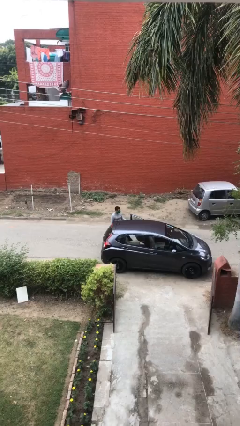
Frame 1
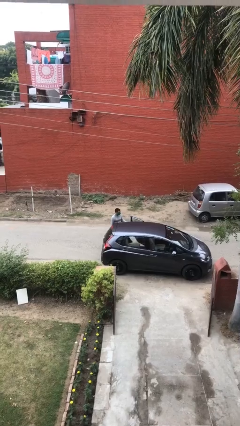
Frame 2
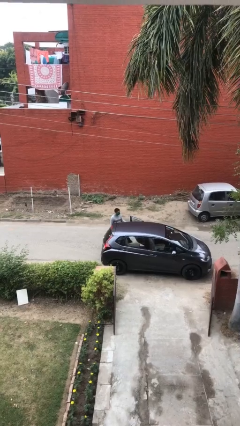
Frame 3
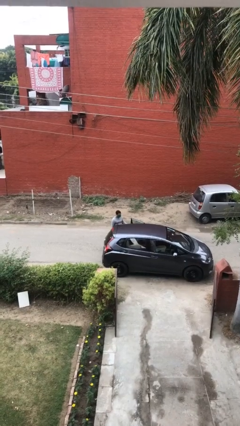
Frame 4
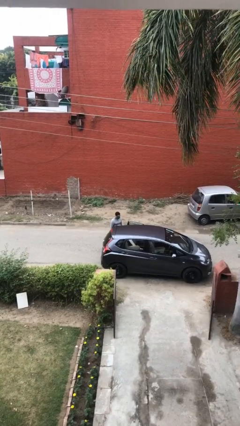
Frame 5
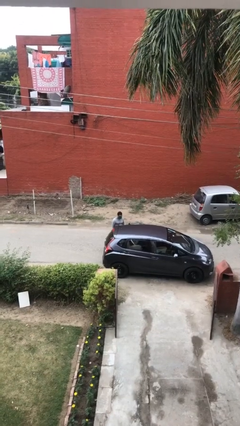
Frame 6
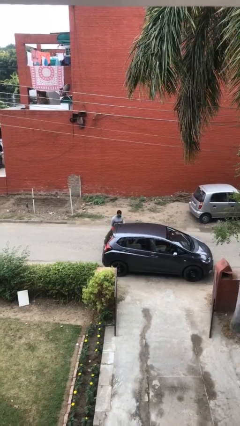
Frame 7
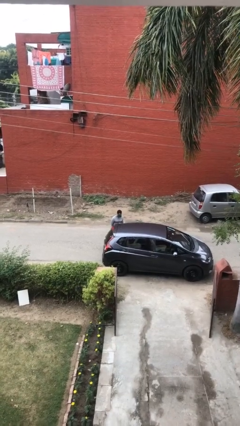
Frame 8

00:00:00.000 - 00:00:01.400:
person closes car door

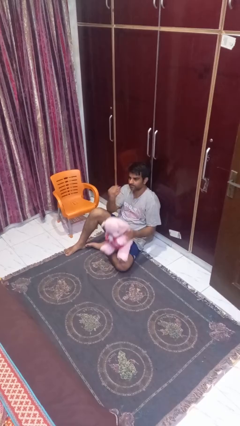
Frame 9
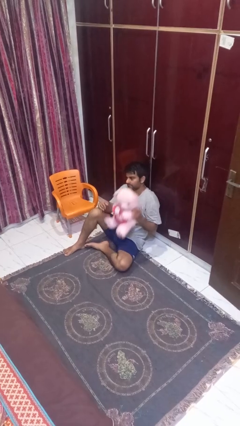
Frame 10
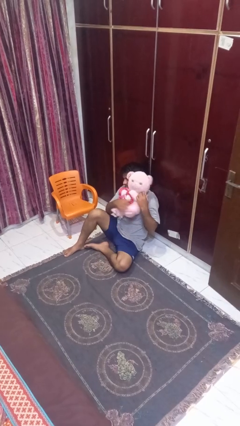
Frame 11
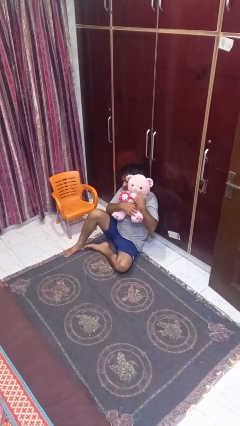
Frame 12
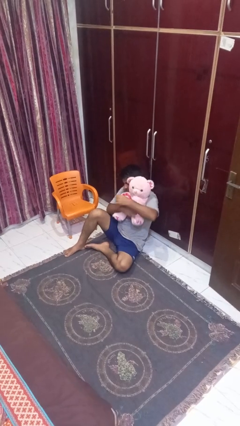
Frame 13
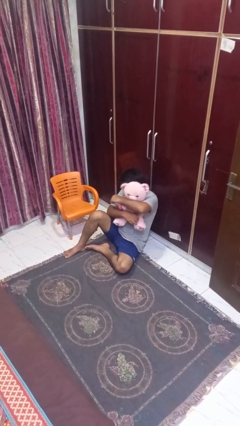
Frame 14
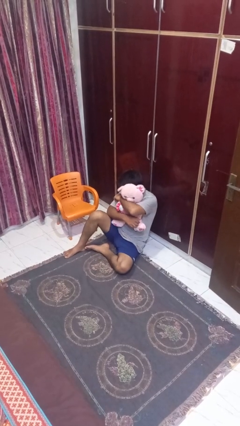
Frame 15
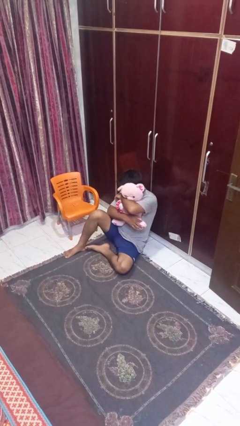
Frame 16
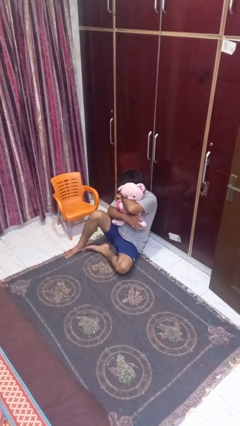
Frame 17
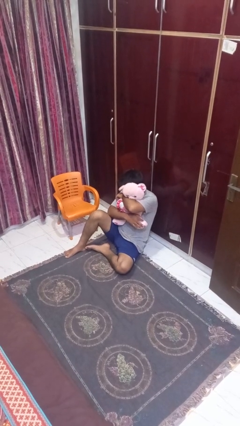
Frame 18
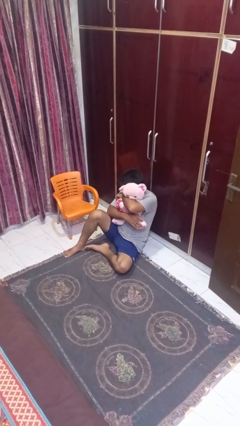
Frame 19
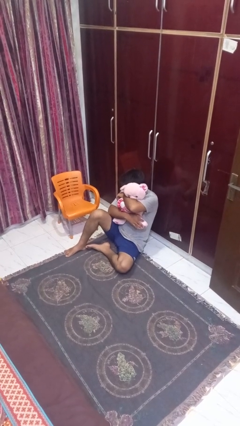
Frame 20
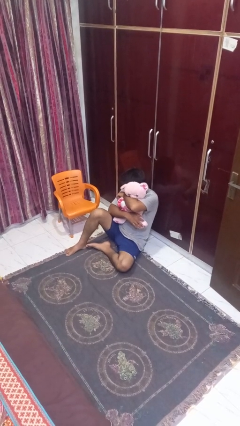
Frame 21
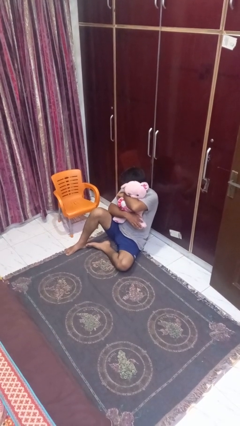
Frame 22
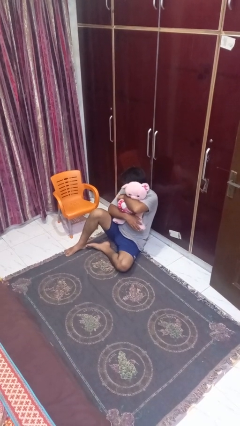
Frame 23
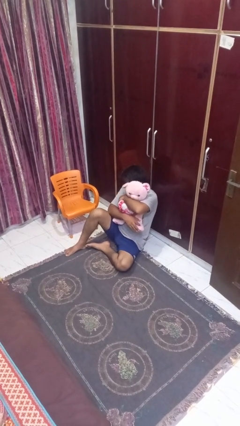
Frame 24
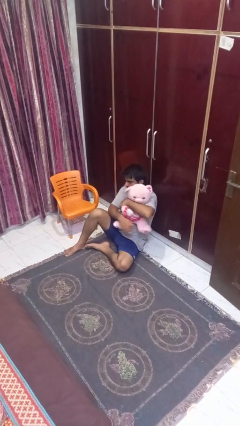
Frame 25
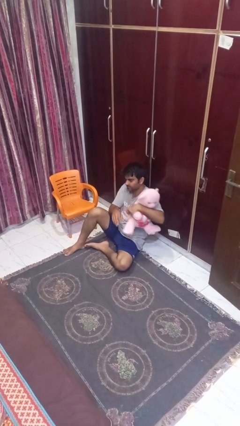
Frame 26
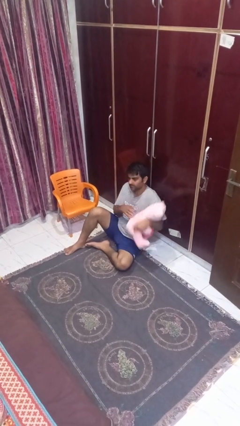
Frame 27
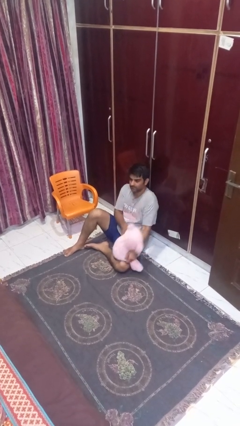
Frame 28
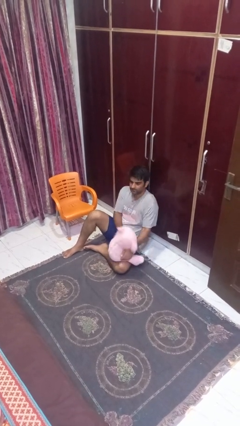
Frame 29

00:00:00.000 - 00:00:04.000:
person hugs stuffed animal

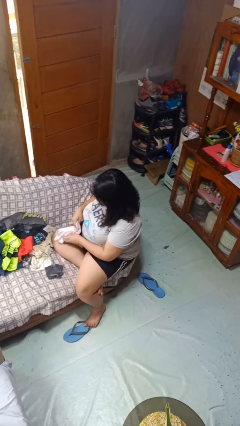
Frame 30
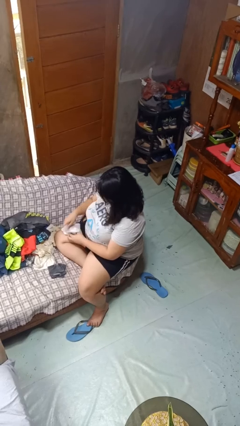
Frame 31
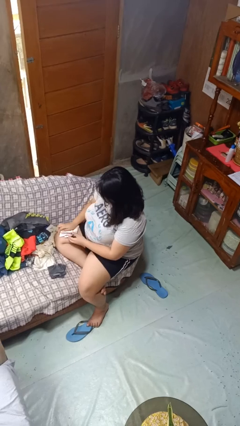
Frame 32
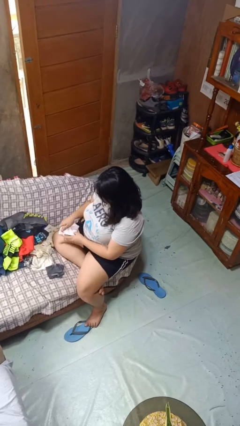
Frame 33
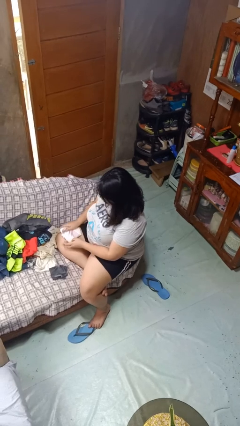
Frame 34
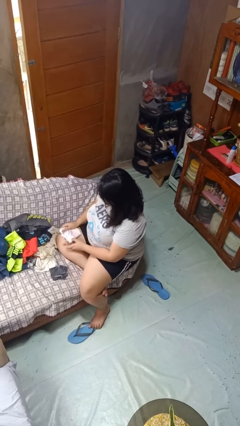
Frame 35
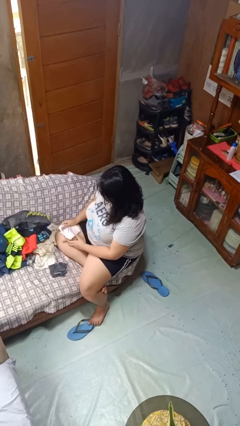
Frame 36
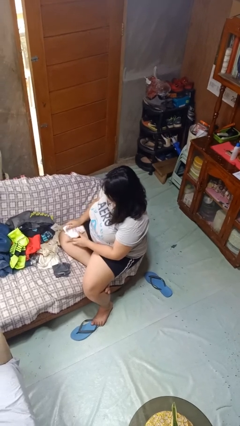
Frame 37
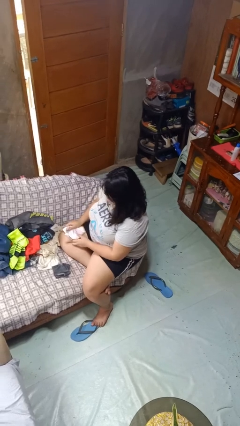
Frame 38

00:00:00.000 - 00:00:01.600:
person folds socks

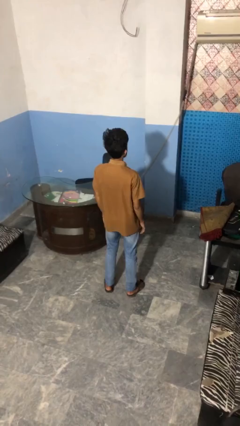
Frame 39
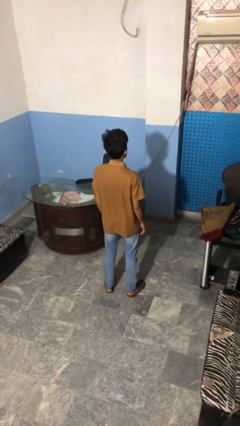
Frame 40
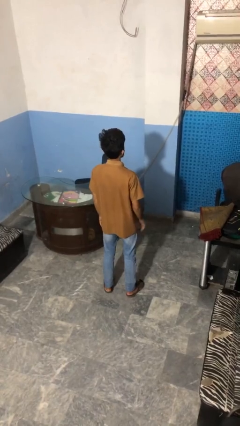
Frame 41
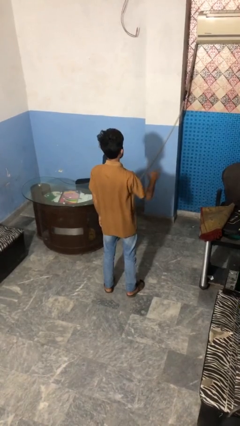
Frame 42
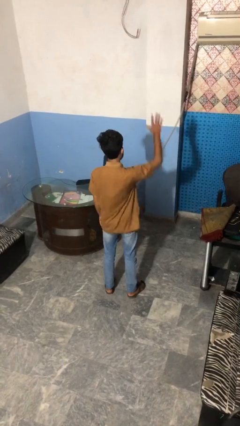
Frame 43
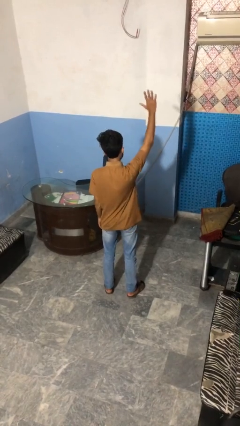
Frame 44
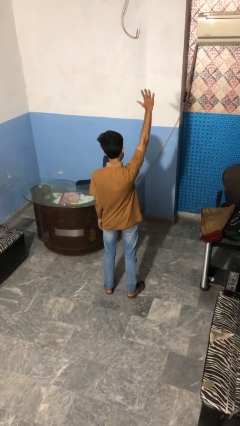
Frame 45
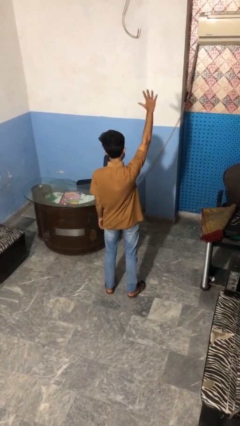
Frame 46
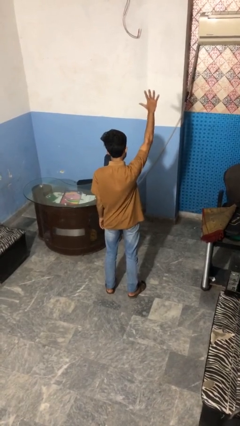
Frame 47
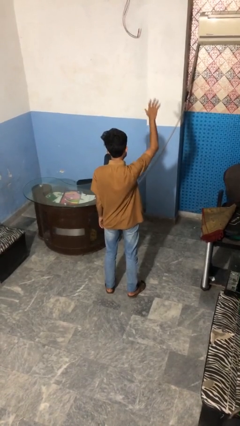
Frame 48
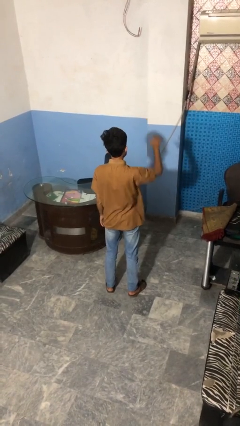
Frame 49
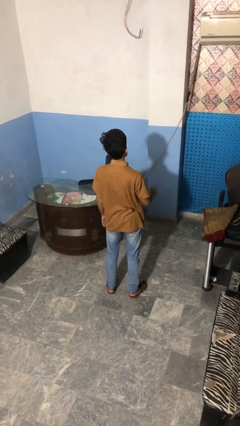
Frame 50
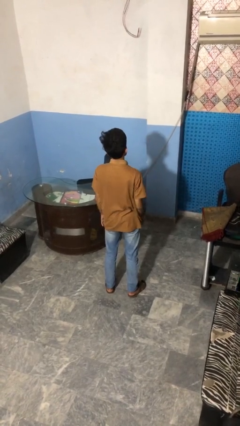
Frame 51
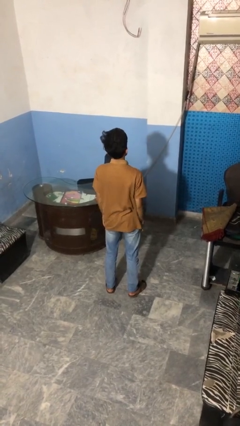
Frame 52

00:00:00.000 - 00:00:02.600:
person gestures number five

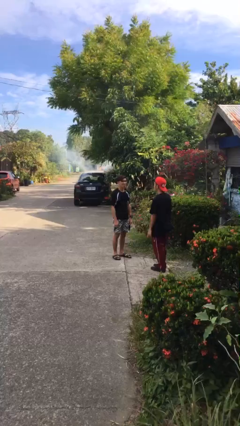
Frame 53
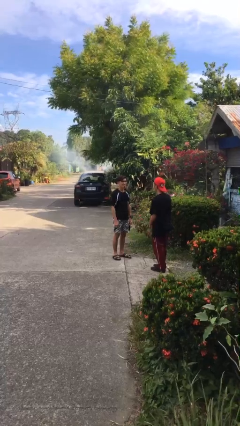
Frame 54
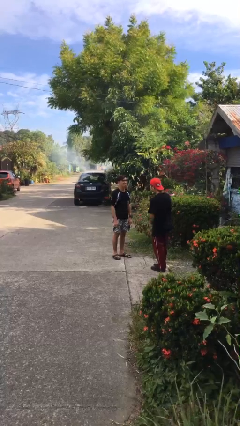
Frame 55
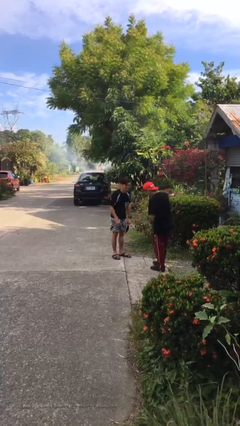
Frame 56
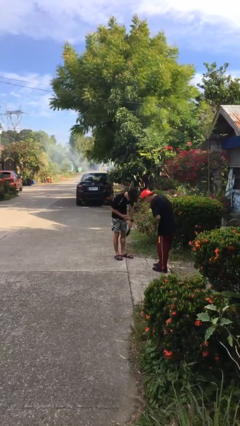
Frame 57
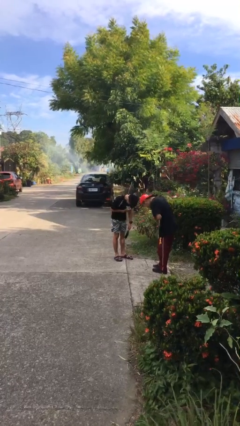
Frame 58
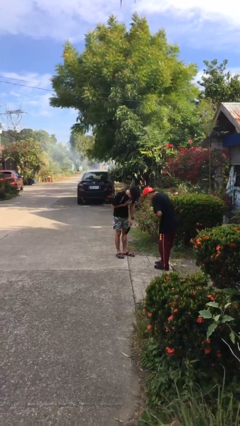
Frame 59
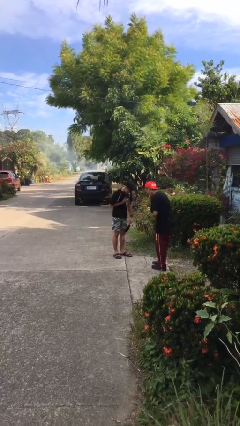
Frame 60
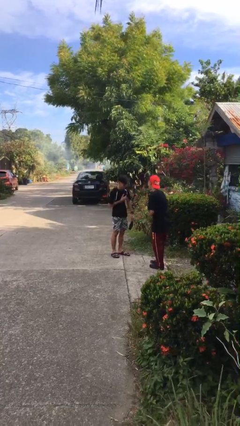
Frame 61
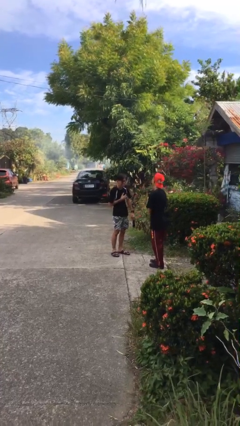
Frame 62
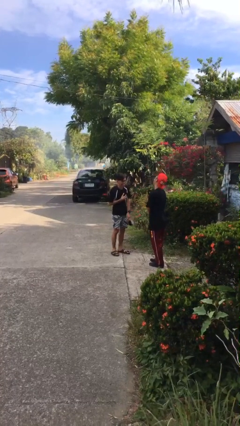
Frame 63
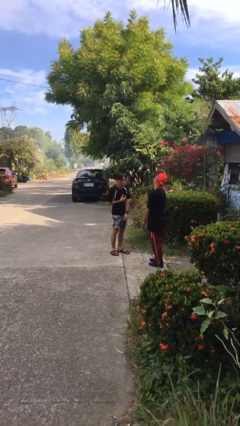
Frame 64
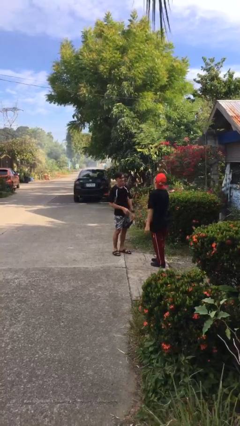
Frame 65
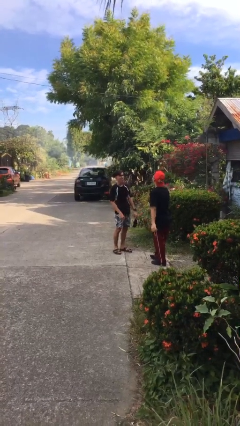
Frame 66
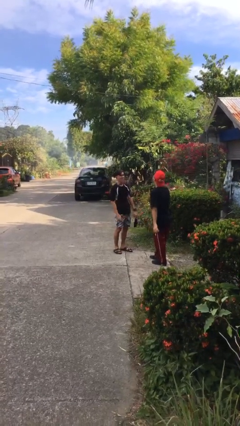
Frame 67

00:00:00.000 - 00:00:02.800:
person laughs with person

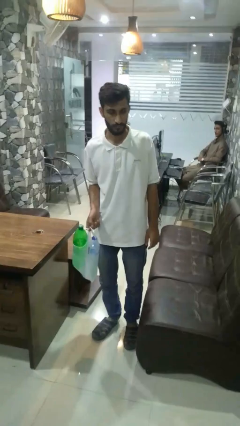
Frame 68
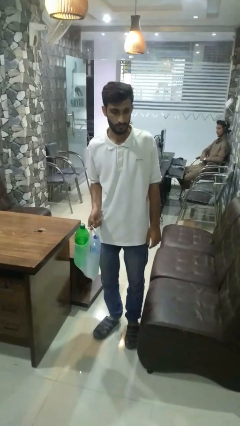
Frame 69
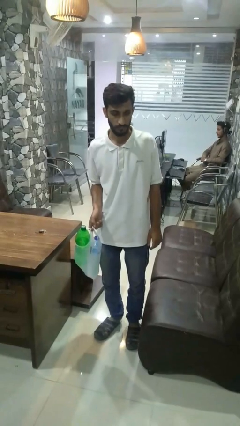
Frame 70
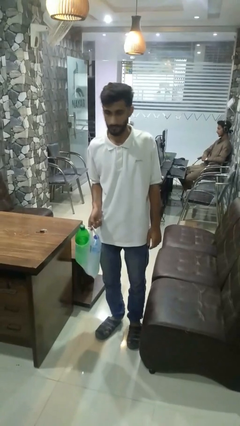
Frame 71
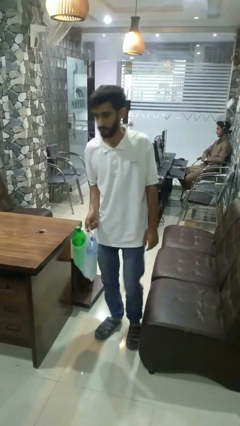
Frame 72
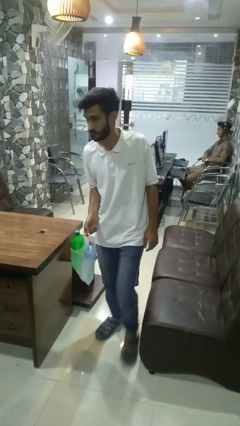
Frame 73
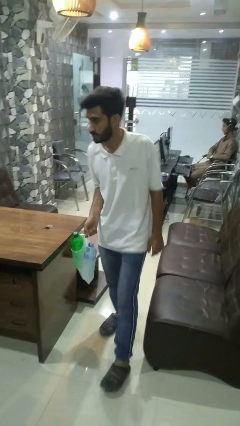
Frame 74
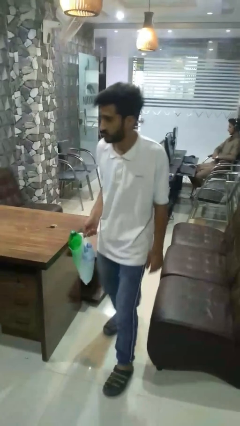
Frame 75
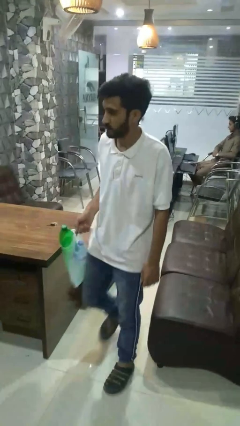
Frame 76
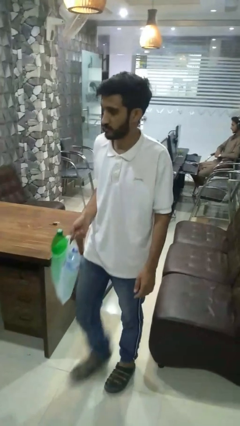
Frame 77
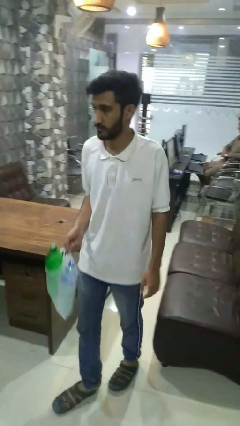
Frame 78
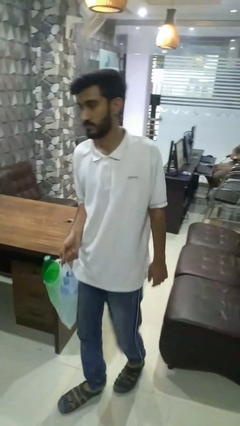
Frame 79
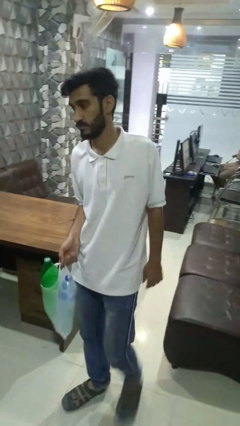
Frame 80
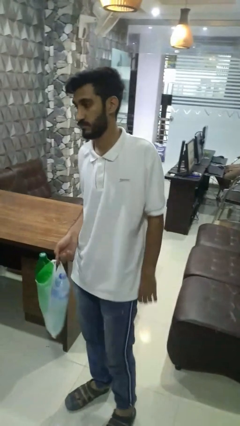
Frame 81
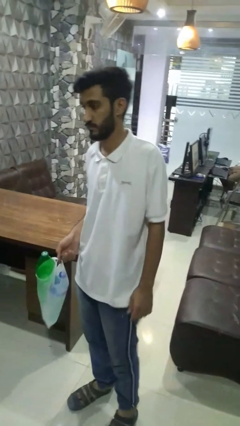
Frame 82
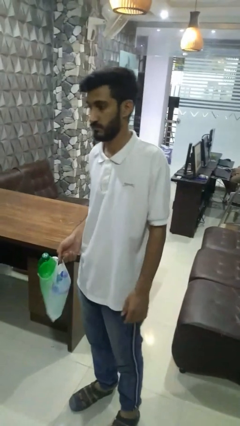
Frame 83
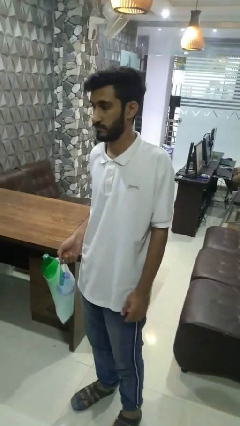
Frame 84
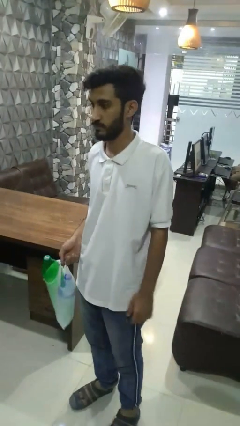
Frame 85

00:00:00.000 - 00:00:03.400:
person carries groceries

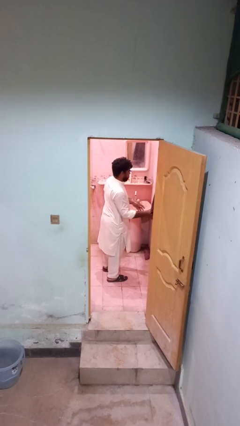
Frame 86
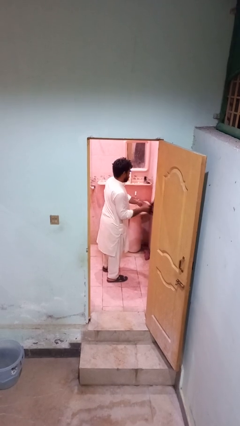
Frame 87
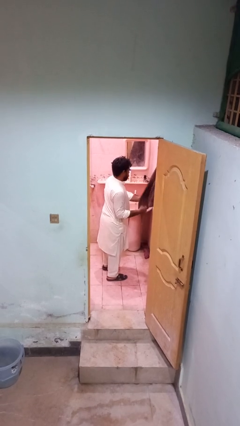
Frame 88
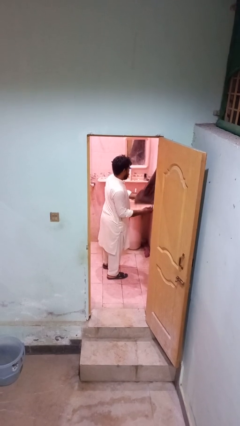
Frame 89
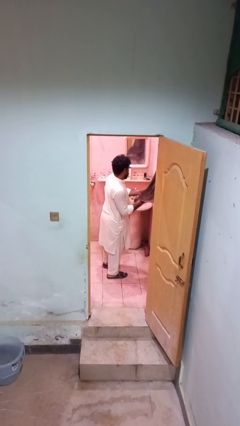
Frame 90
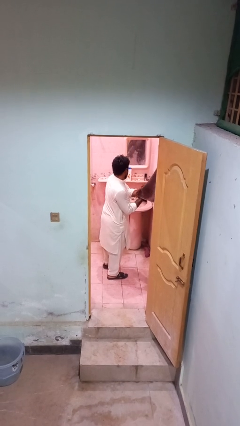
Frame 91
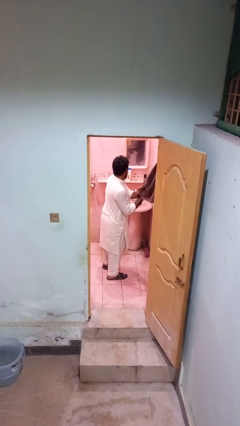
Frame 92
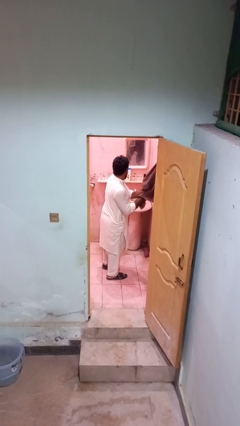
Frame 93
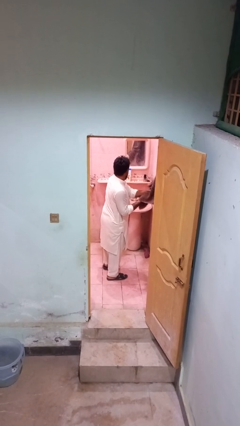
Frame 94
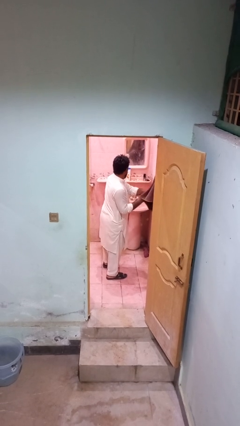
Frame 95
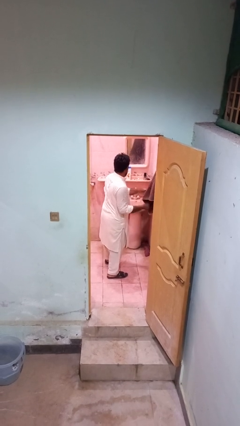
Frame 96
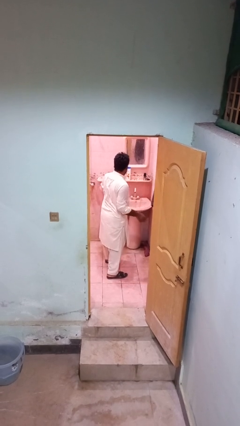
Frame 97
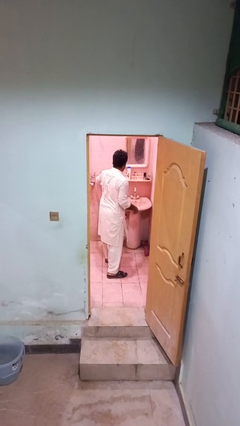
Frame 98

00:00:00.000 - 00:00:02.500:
person dries hands with towel
